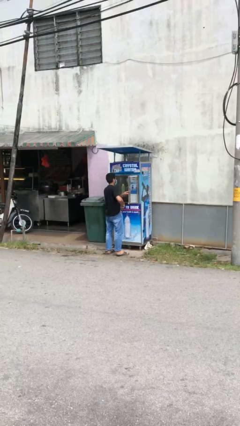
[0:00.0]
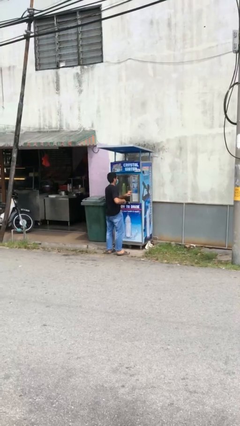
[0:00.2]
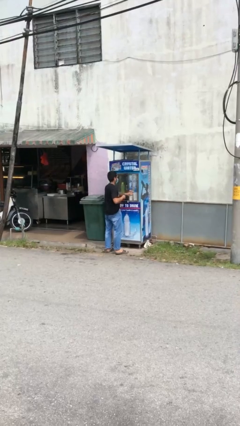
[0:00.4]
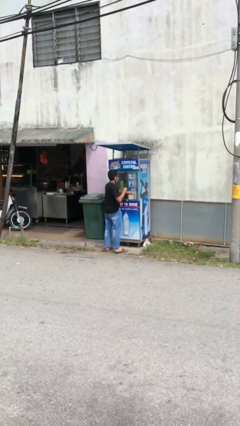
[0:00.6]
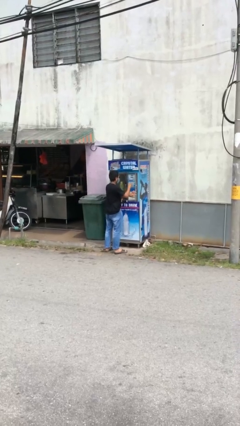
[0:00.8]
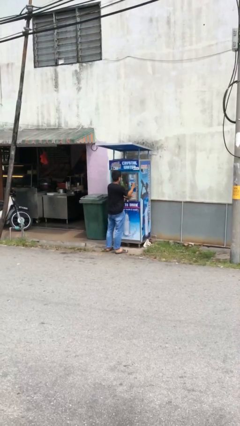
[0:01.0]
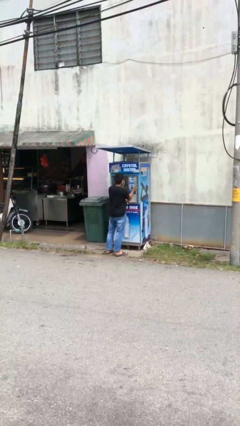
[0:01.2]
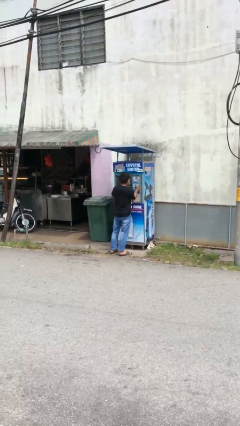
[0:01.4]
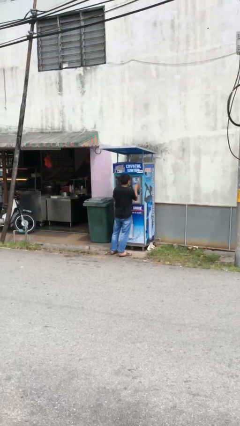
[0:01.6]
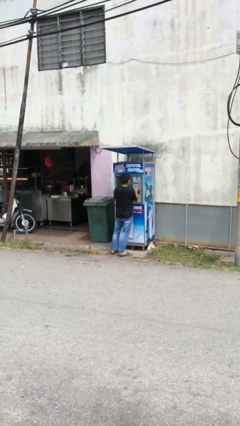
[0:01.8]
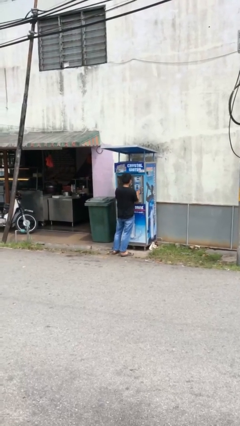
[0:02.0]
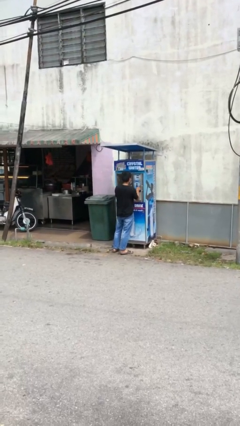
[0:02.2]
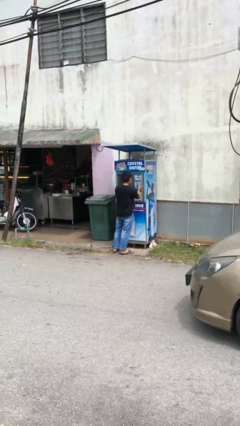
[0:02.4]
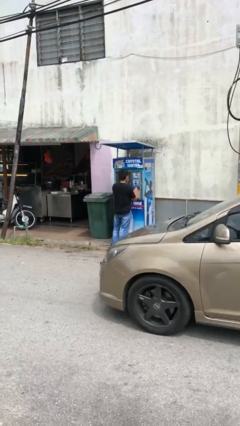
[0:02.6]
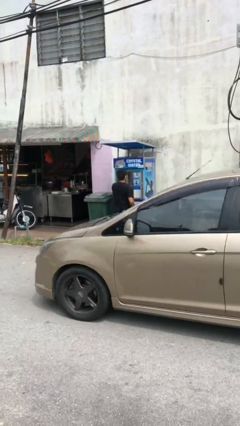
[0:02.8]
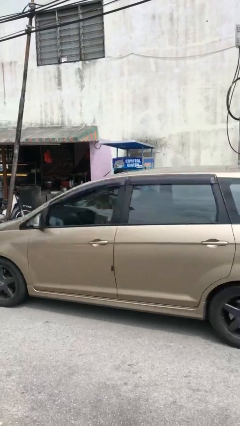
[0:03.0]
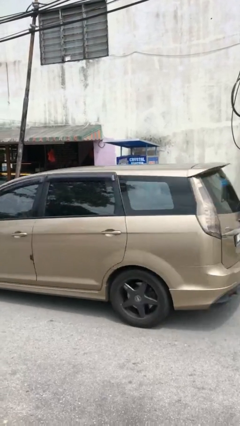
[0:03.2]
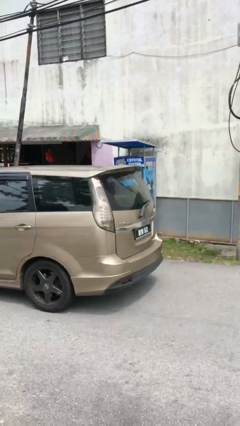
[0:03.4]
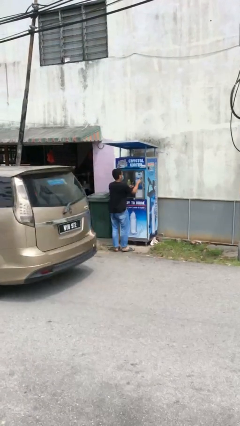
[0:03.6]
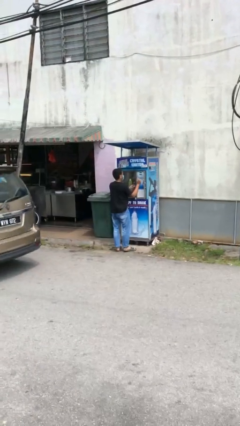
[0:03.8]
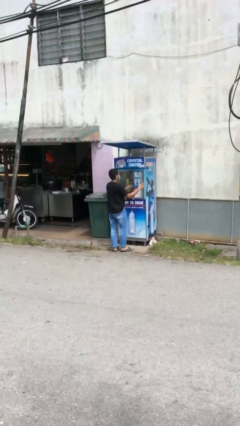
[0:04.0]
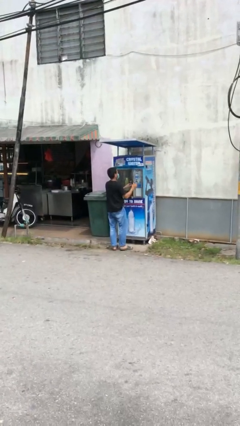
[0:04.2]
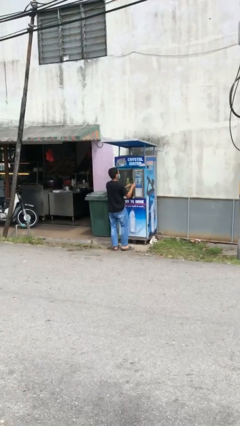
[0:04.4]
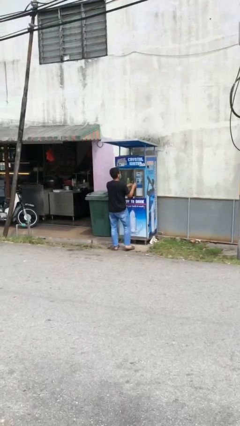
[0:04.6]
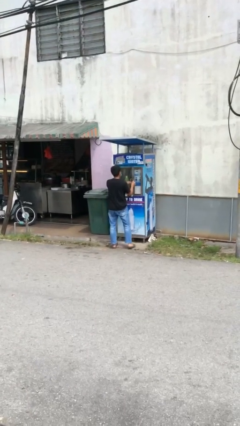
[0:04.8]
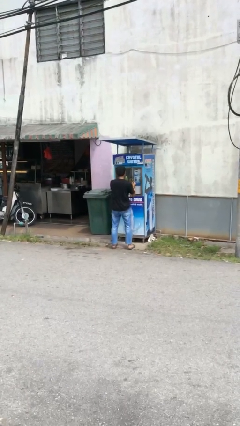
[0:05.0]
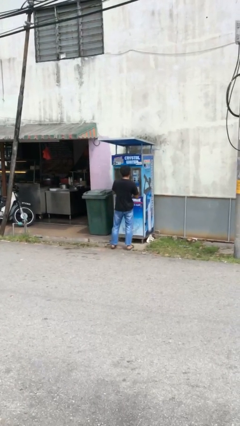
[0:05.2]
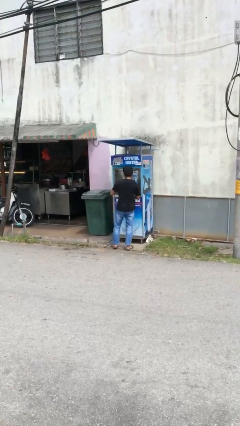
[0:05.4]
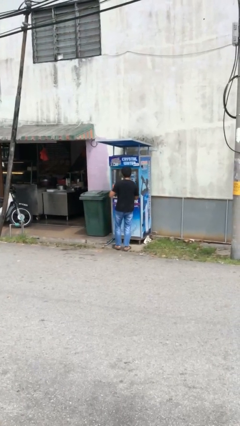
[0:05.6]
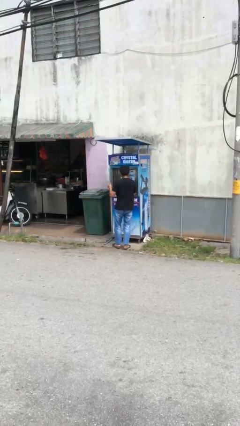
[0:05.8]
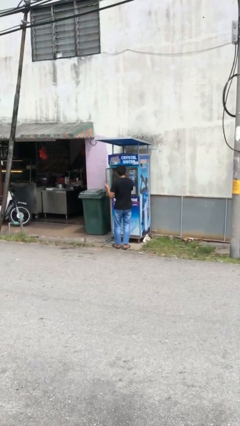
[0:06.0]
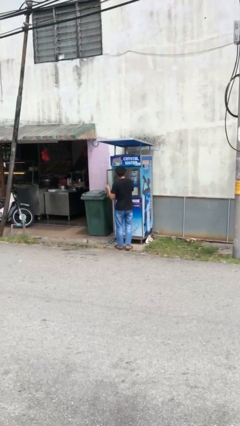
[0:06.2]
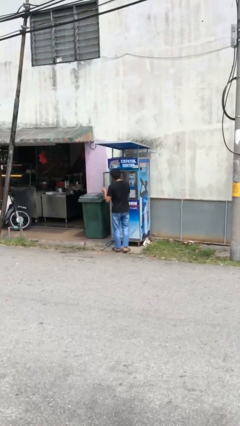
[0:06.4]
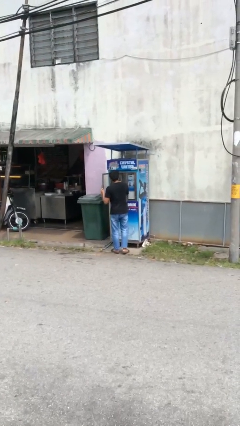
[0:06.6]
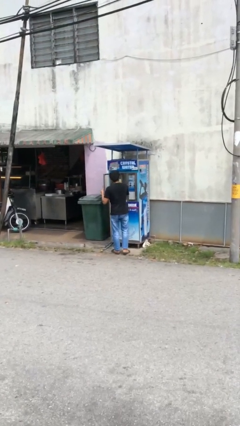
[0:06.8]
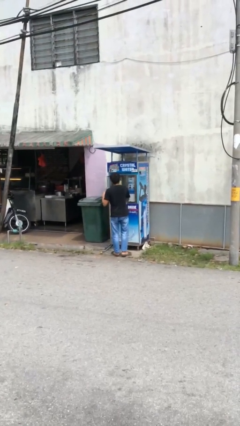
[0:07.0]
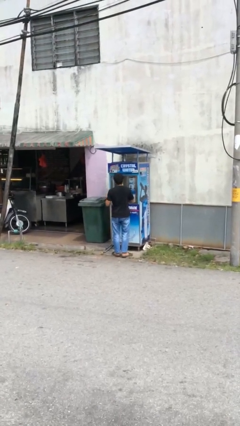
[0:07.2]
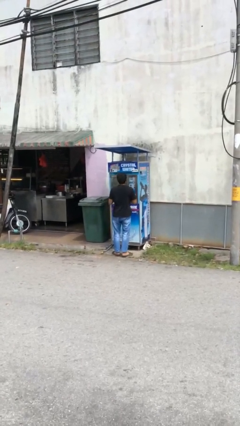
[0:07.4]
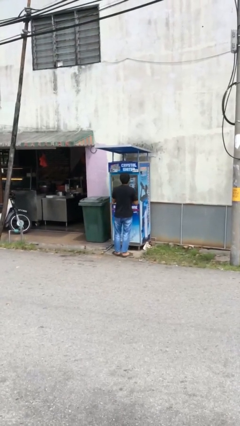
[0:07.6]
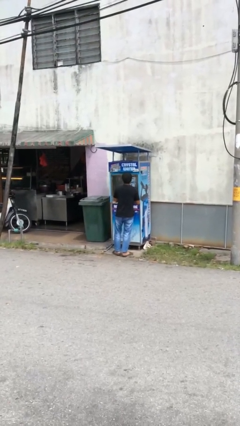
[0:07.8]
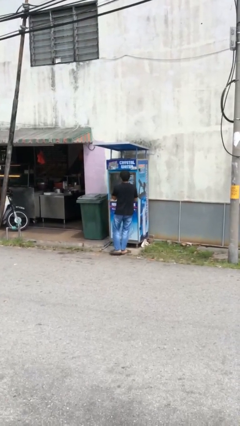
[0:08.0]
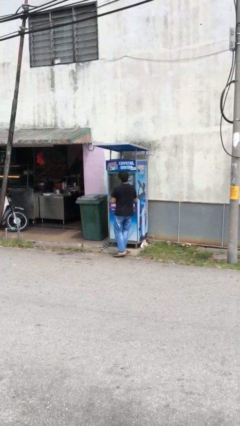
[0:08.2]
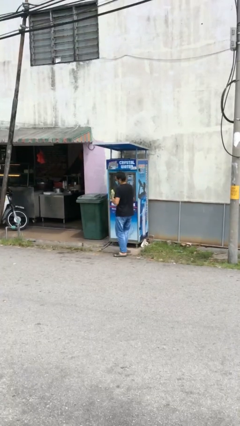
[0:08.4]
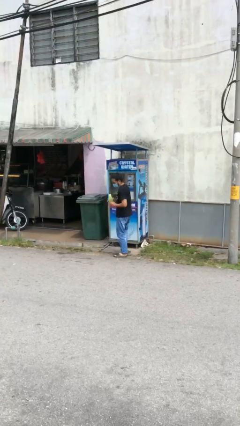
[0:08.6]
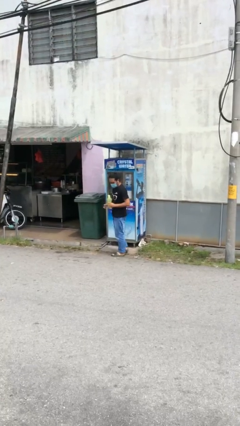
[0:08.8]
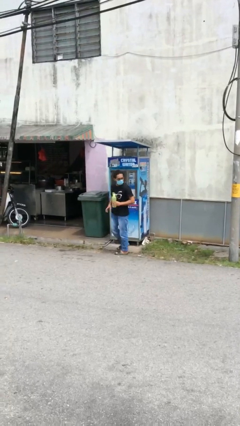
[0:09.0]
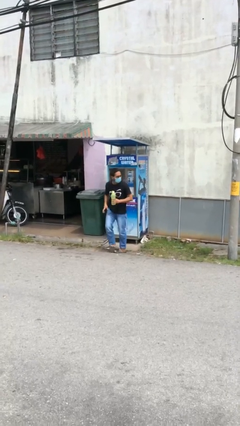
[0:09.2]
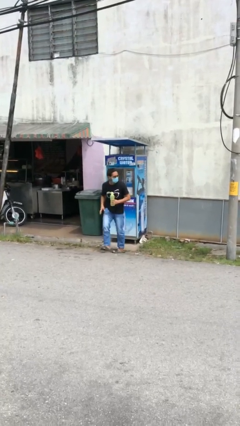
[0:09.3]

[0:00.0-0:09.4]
person purchases from machine

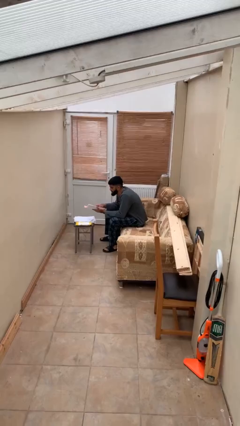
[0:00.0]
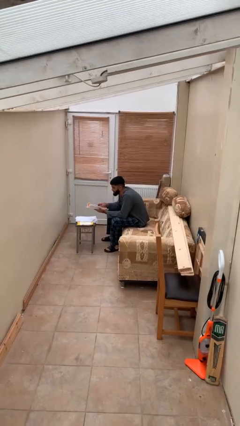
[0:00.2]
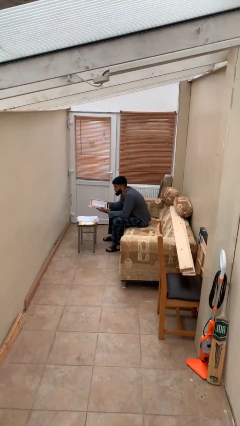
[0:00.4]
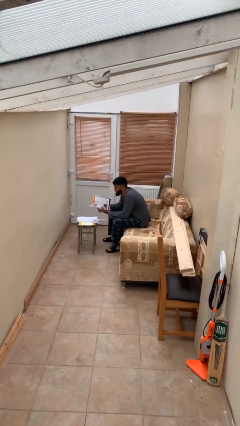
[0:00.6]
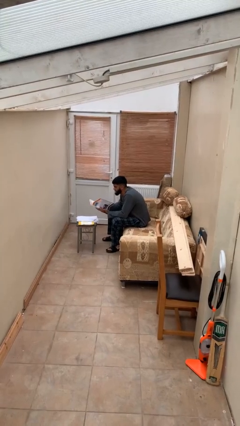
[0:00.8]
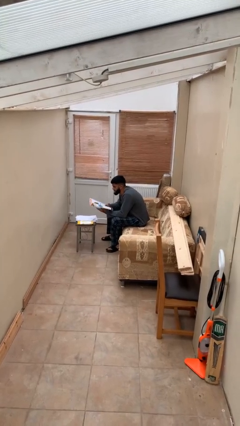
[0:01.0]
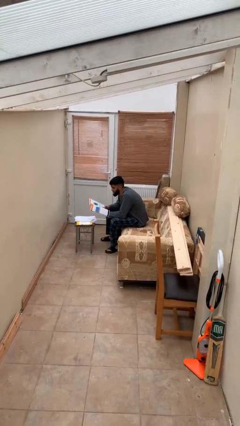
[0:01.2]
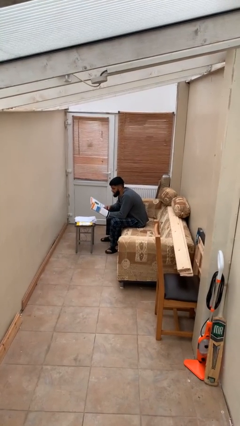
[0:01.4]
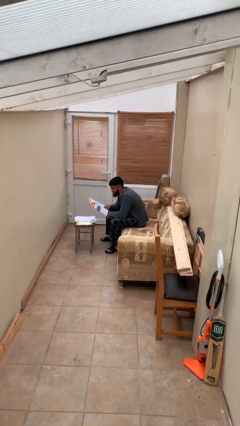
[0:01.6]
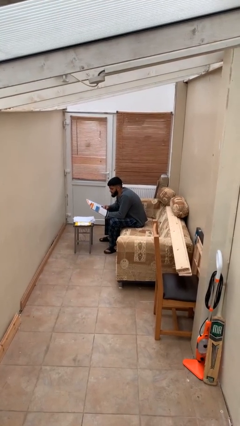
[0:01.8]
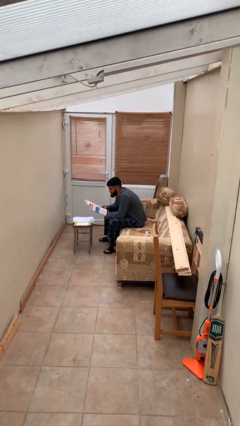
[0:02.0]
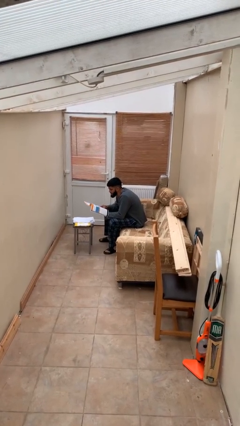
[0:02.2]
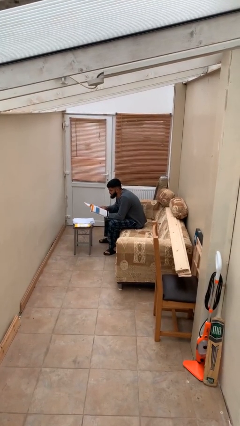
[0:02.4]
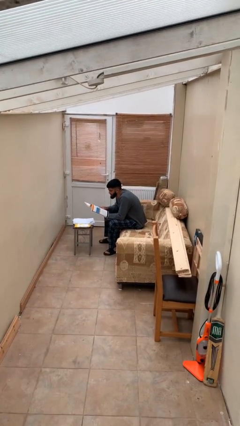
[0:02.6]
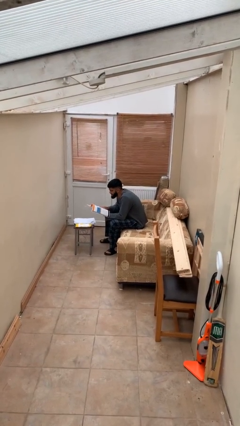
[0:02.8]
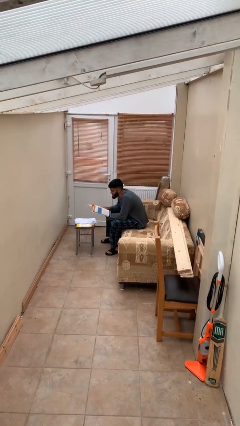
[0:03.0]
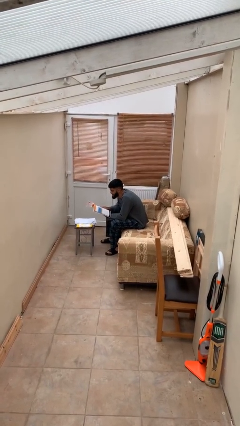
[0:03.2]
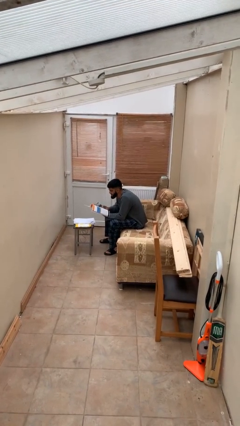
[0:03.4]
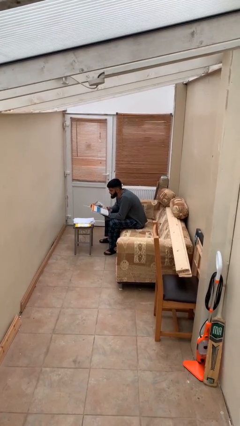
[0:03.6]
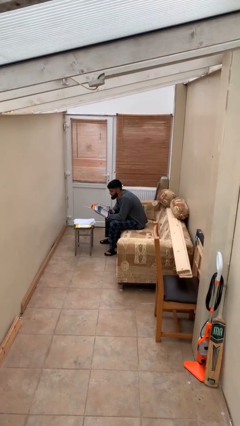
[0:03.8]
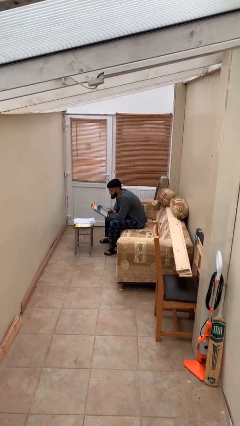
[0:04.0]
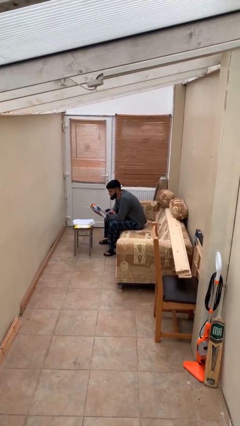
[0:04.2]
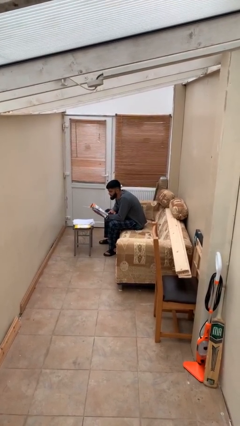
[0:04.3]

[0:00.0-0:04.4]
person reads document

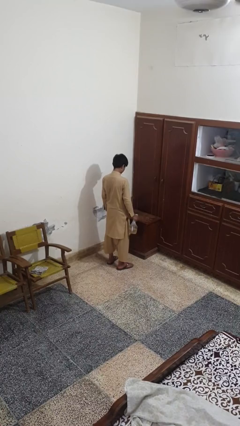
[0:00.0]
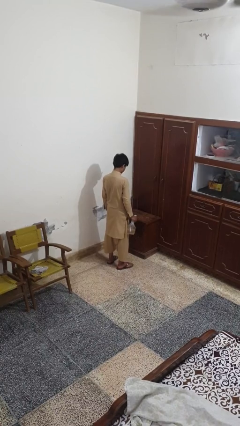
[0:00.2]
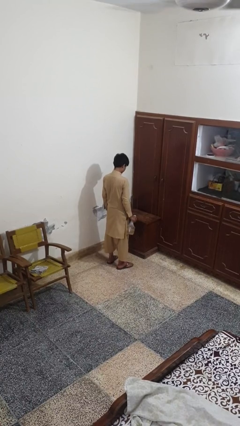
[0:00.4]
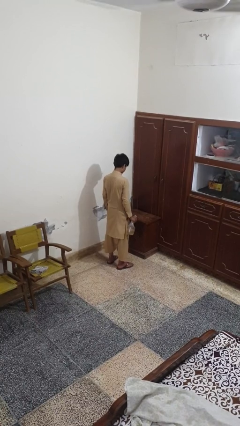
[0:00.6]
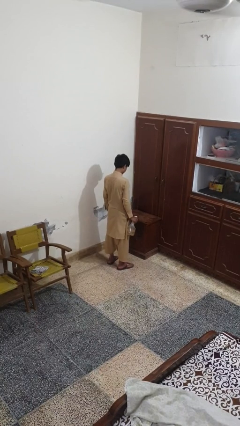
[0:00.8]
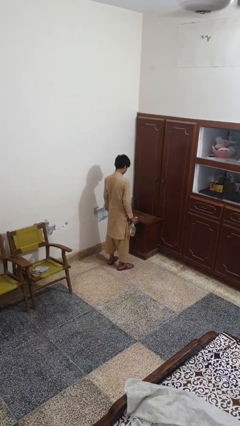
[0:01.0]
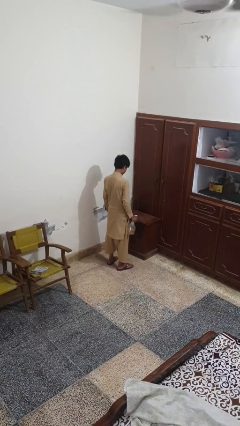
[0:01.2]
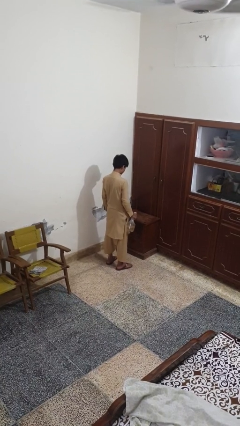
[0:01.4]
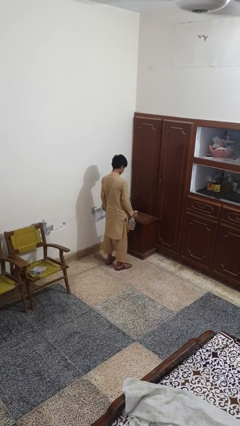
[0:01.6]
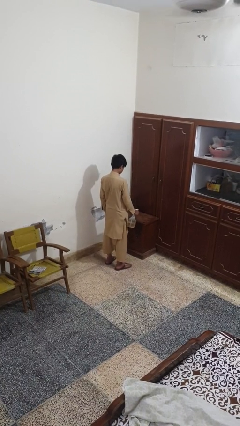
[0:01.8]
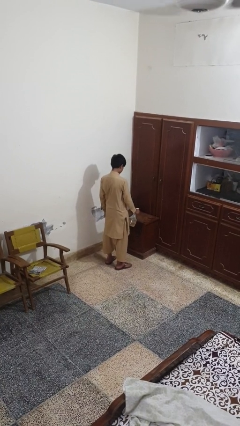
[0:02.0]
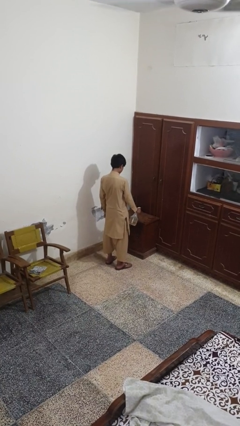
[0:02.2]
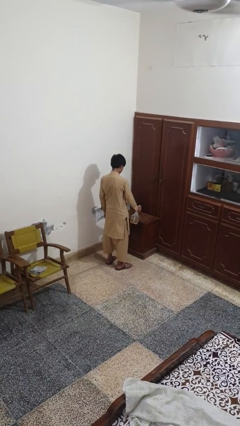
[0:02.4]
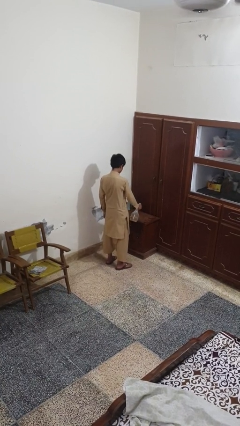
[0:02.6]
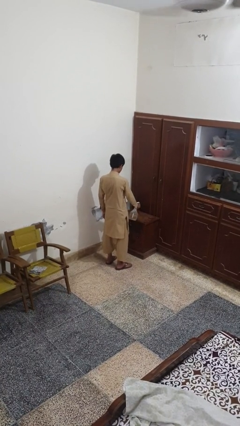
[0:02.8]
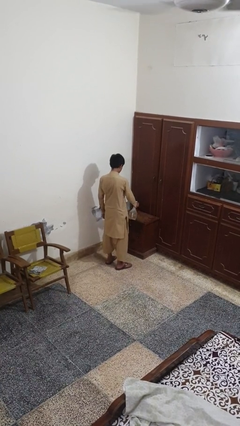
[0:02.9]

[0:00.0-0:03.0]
person sprays from bottle

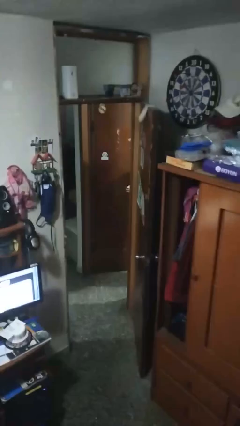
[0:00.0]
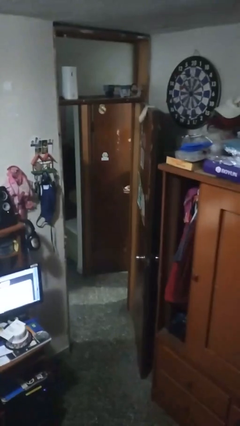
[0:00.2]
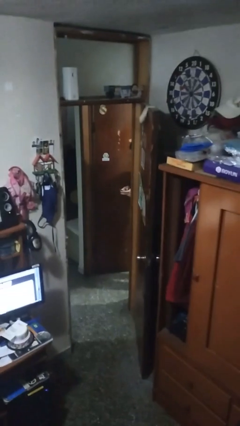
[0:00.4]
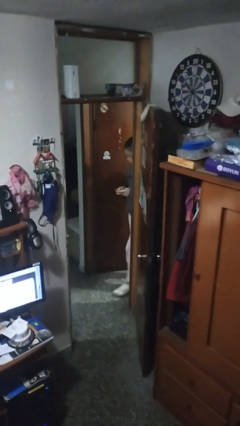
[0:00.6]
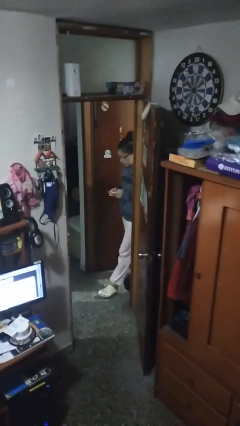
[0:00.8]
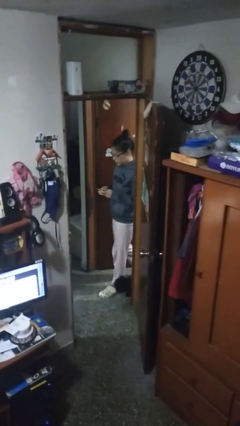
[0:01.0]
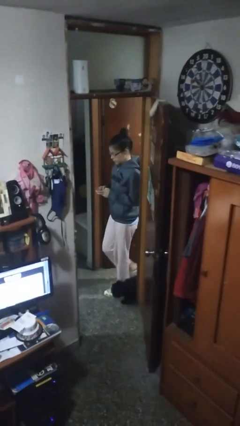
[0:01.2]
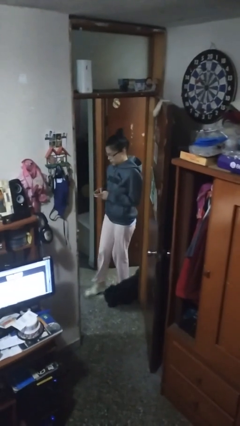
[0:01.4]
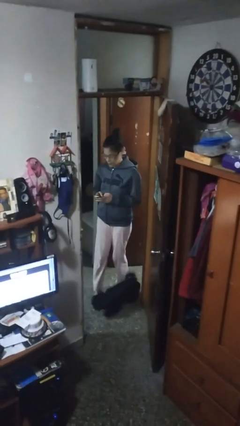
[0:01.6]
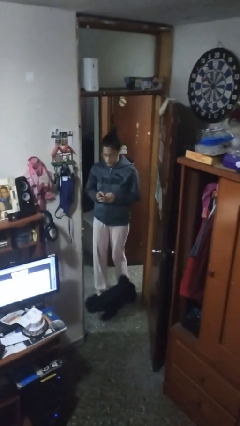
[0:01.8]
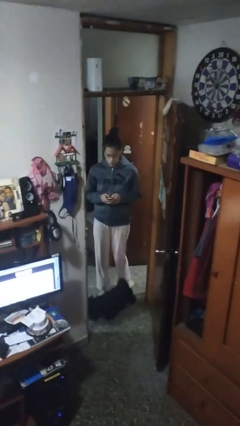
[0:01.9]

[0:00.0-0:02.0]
person enters scene through structure
